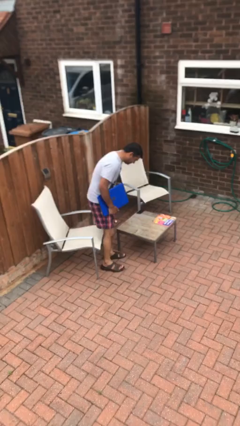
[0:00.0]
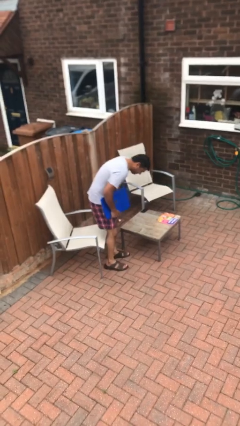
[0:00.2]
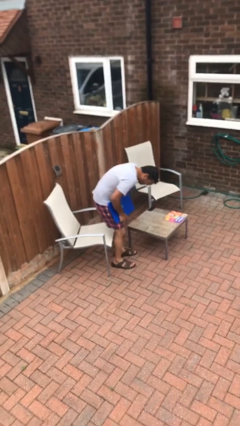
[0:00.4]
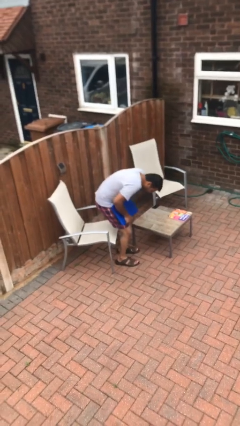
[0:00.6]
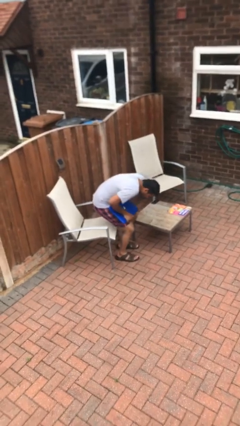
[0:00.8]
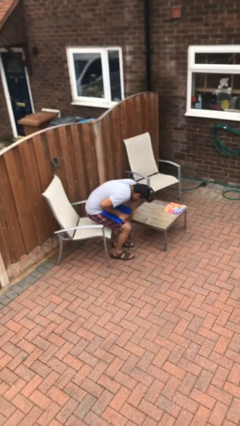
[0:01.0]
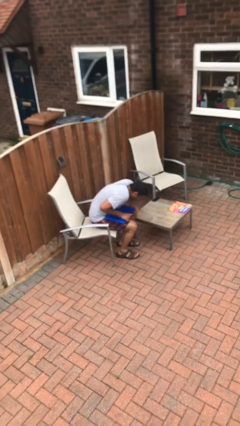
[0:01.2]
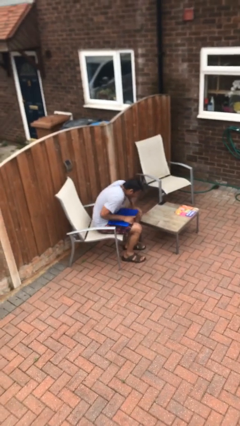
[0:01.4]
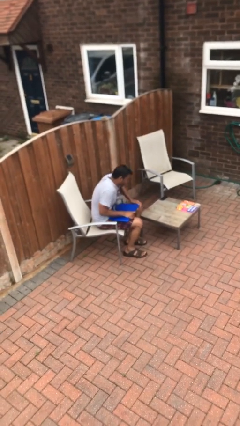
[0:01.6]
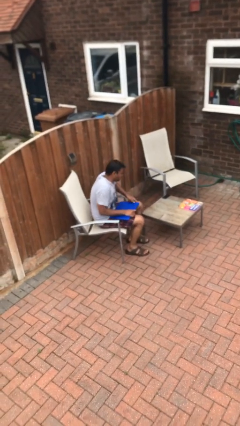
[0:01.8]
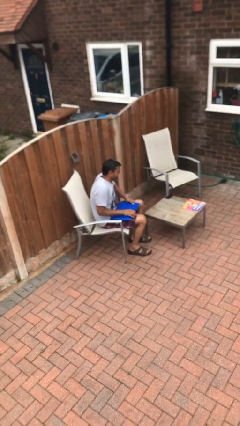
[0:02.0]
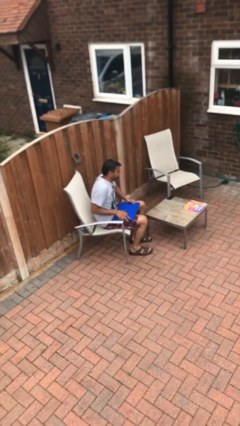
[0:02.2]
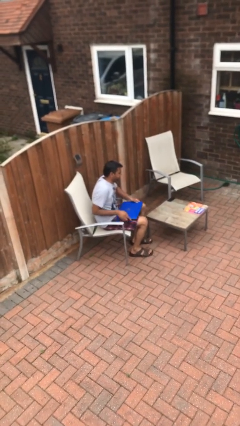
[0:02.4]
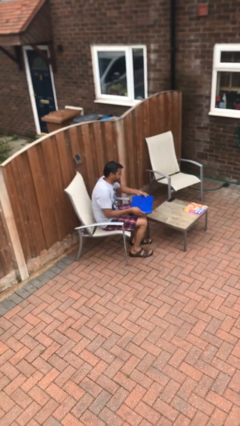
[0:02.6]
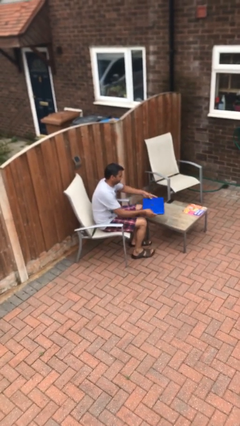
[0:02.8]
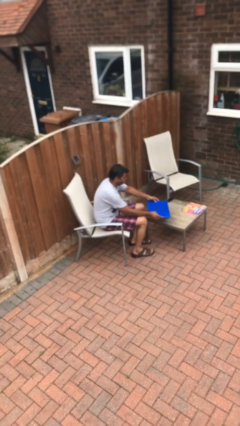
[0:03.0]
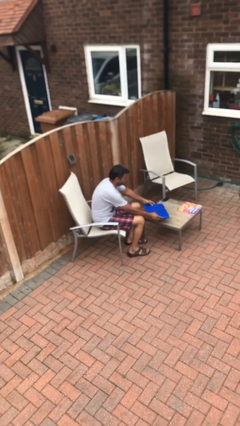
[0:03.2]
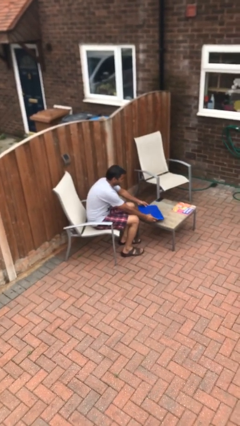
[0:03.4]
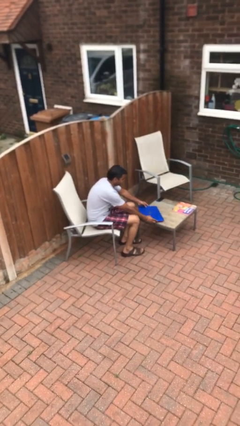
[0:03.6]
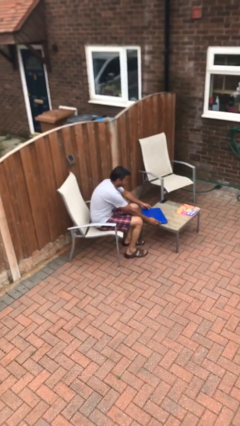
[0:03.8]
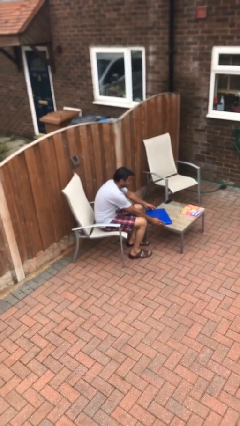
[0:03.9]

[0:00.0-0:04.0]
person sits down

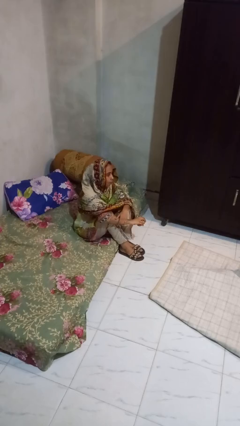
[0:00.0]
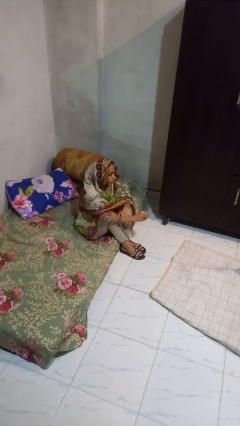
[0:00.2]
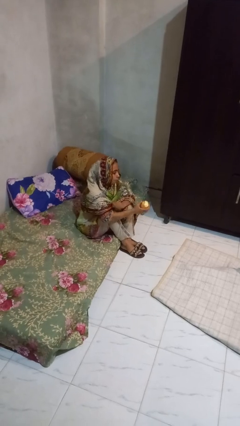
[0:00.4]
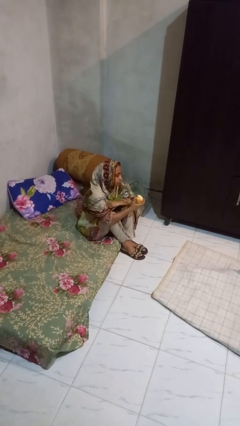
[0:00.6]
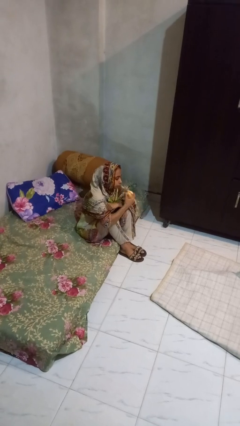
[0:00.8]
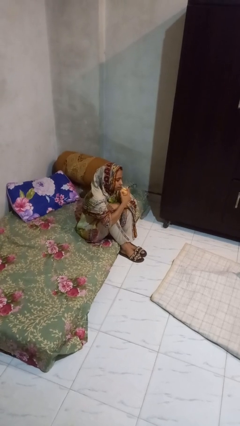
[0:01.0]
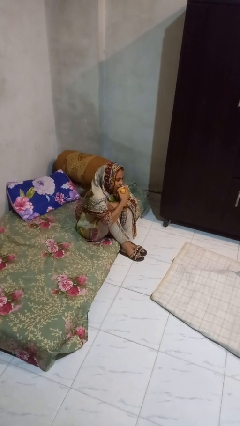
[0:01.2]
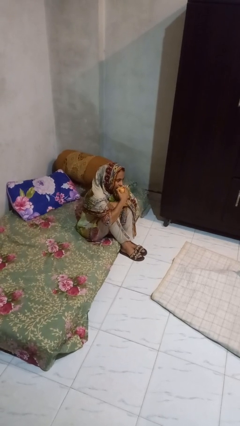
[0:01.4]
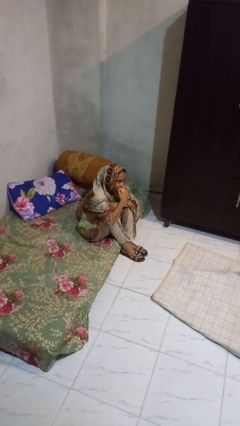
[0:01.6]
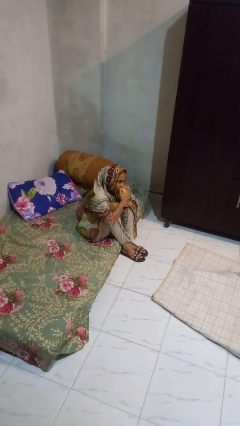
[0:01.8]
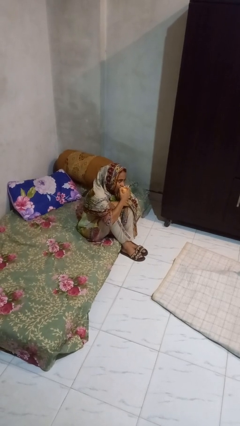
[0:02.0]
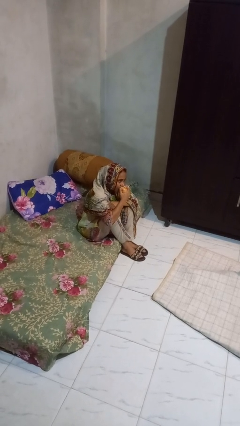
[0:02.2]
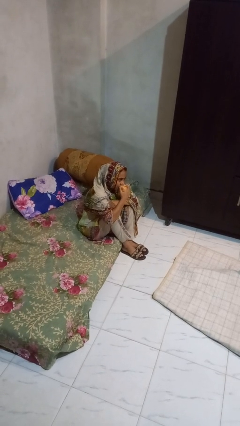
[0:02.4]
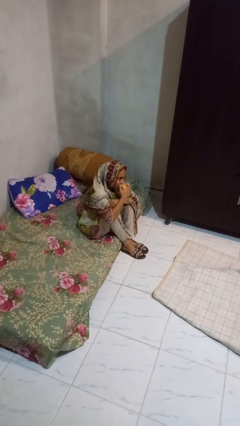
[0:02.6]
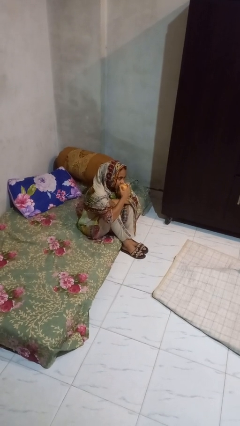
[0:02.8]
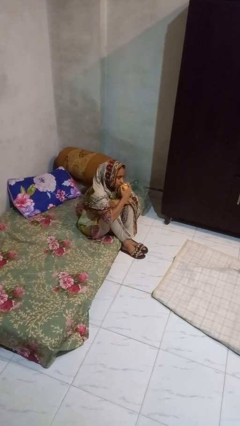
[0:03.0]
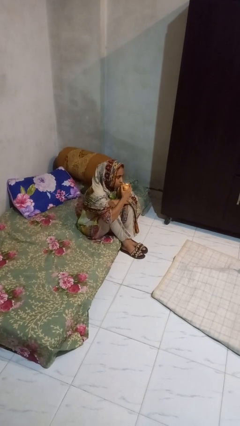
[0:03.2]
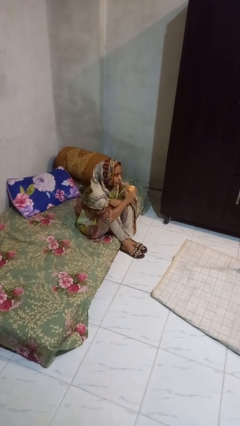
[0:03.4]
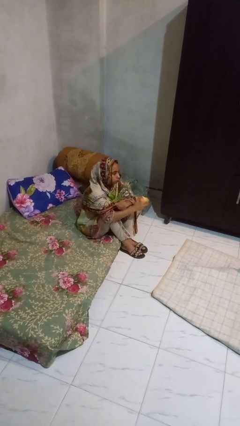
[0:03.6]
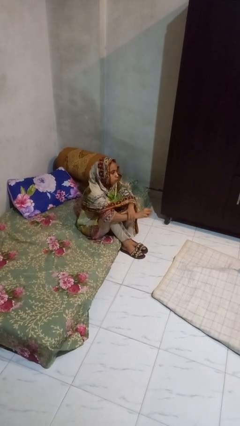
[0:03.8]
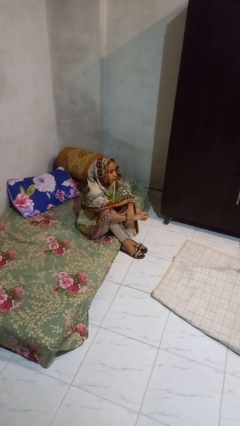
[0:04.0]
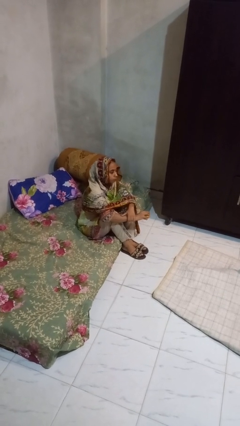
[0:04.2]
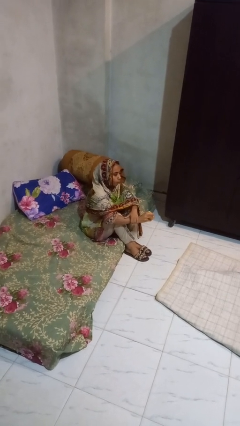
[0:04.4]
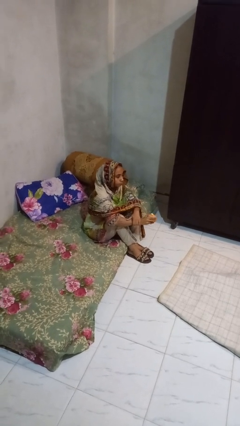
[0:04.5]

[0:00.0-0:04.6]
person eats apple

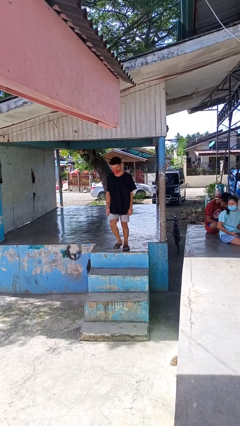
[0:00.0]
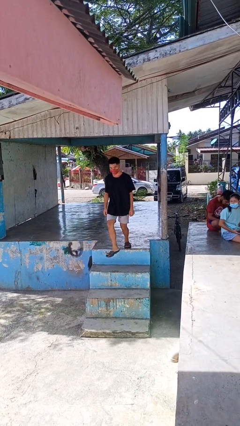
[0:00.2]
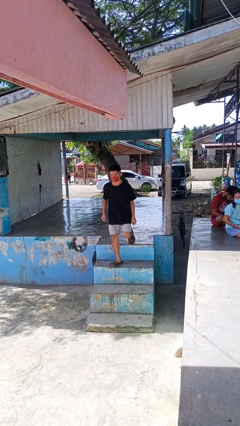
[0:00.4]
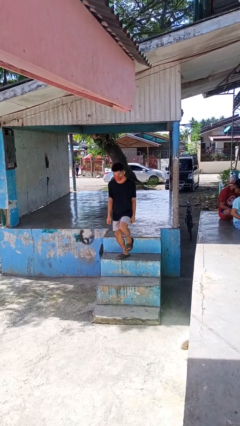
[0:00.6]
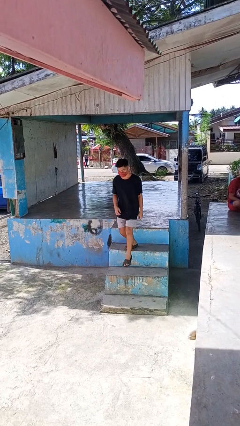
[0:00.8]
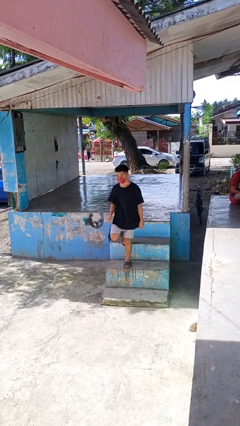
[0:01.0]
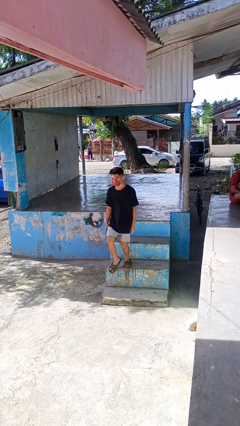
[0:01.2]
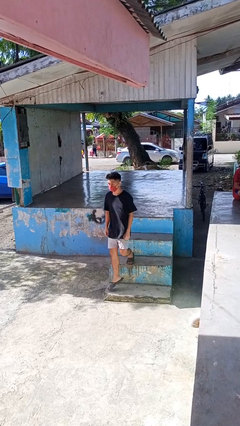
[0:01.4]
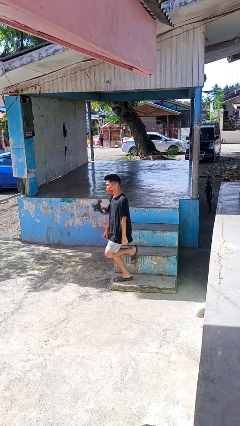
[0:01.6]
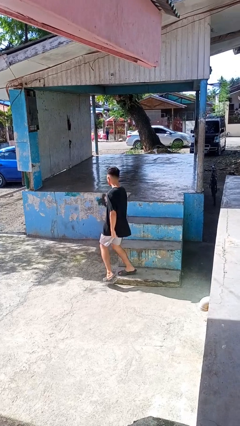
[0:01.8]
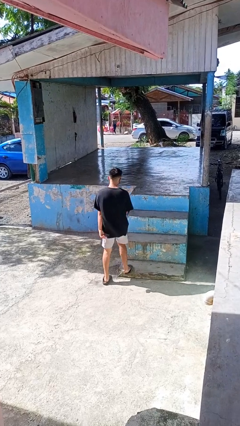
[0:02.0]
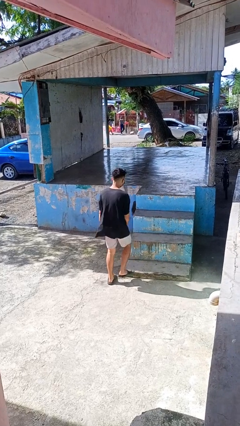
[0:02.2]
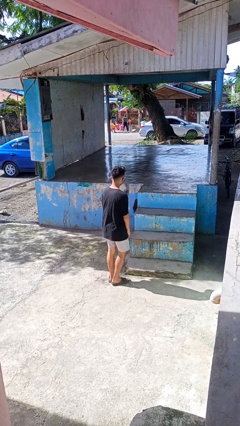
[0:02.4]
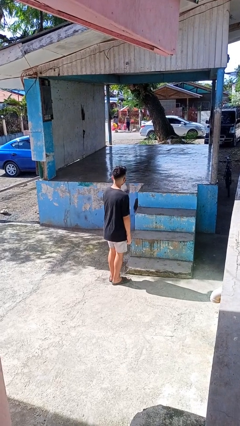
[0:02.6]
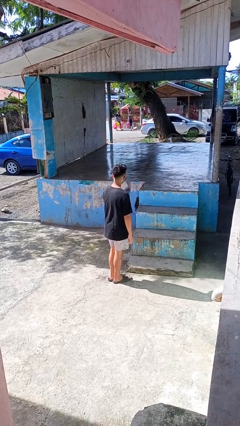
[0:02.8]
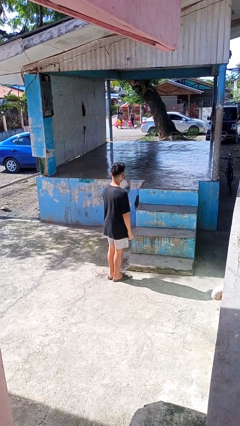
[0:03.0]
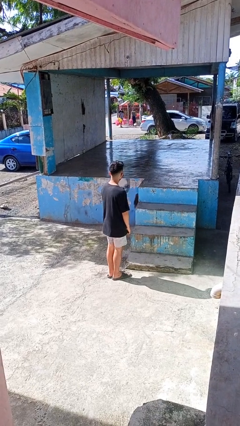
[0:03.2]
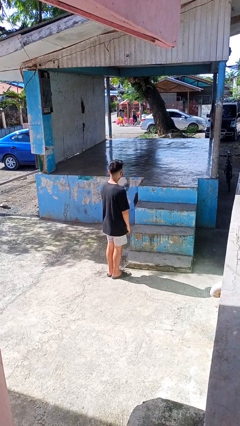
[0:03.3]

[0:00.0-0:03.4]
person climbs down stairs

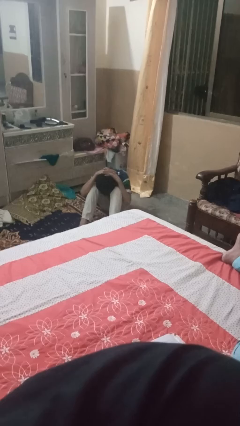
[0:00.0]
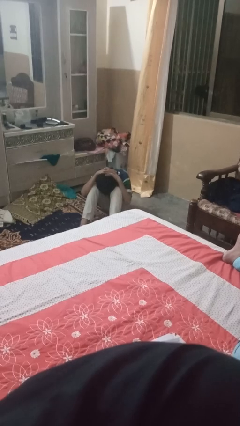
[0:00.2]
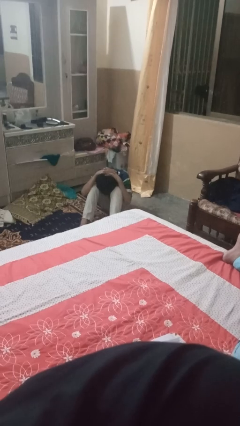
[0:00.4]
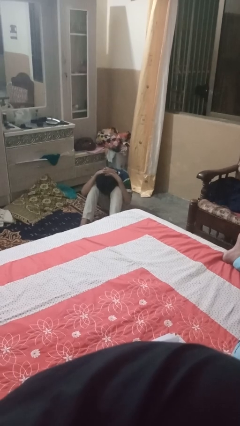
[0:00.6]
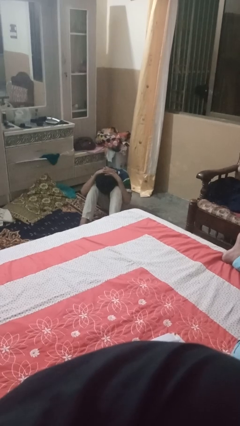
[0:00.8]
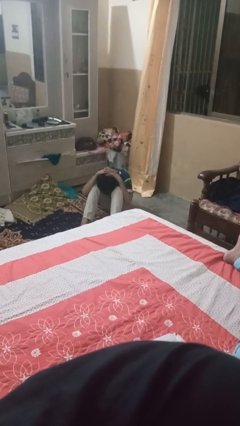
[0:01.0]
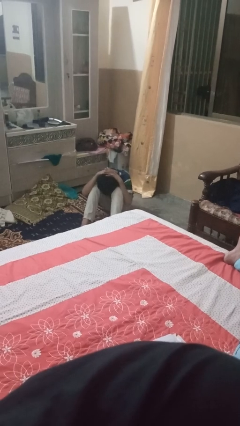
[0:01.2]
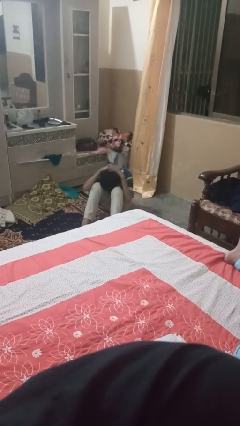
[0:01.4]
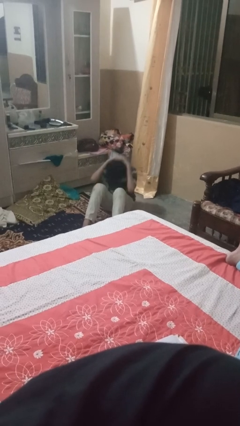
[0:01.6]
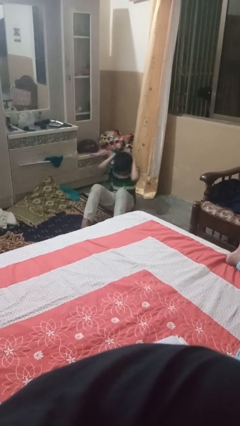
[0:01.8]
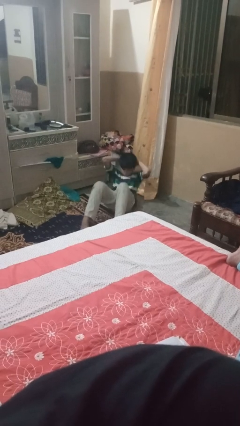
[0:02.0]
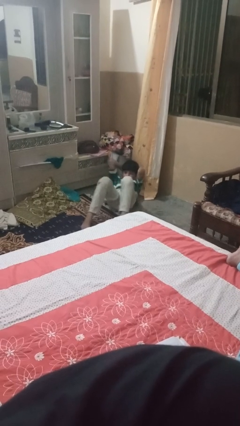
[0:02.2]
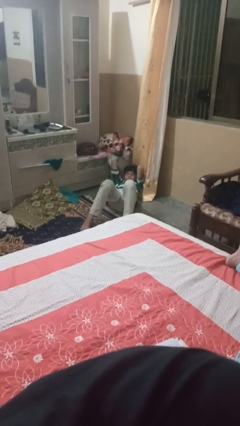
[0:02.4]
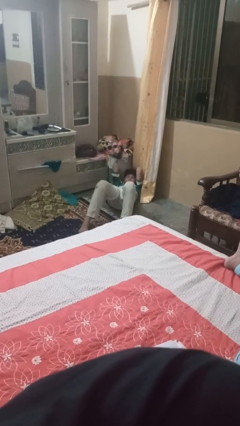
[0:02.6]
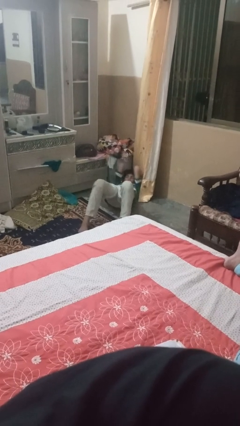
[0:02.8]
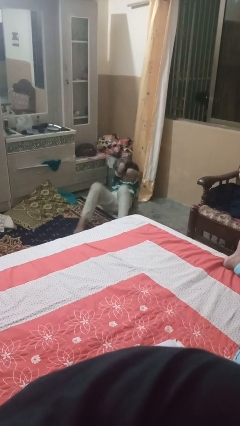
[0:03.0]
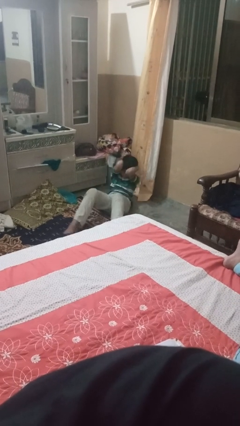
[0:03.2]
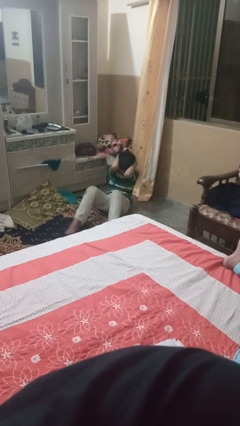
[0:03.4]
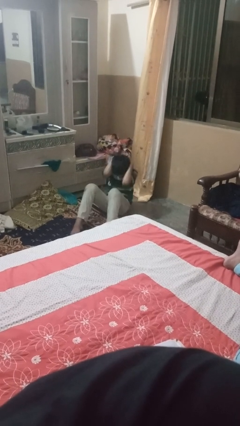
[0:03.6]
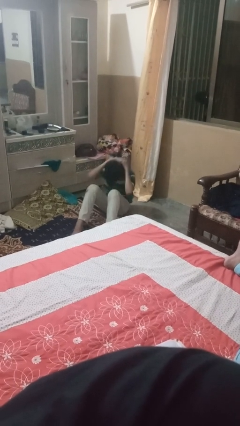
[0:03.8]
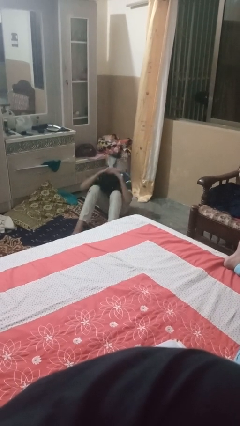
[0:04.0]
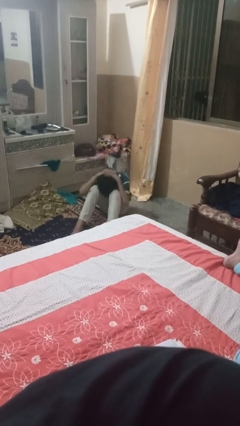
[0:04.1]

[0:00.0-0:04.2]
person exercises with situp

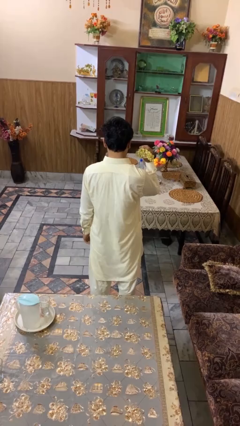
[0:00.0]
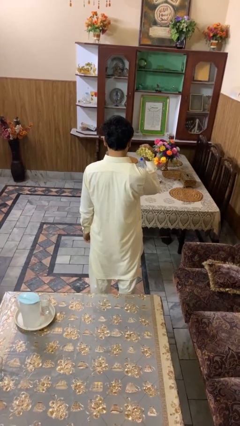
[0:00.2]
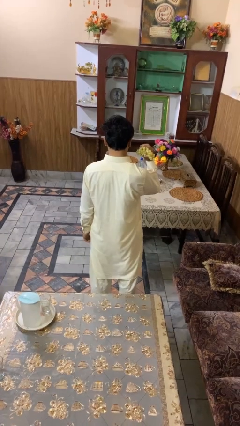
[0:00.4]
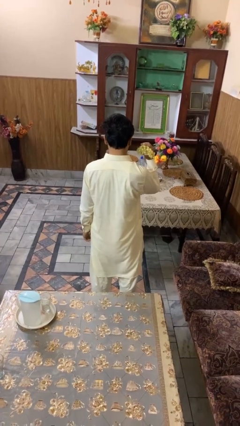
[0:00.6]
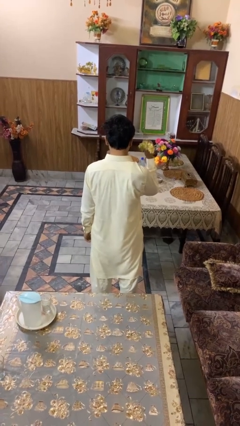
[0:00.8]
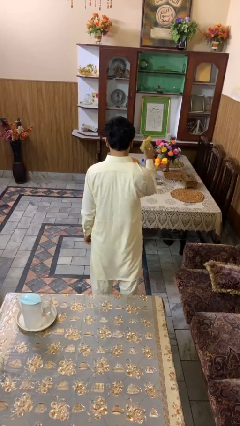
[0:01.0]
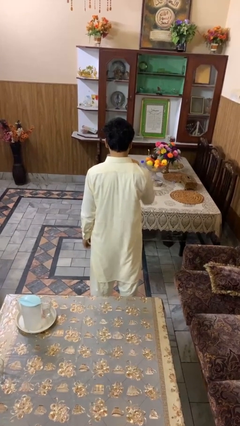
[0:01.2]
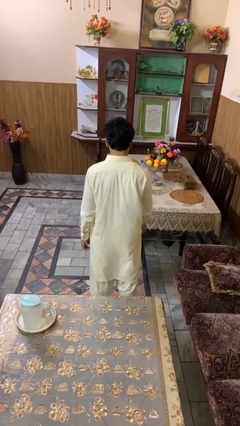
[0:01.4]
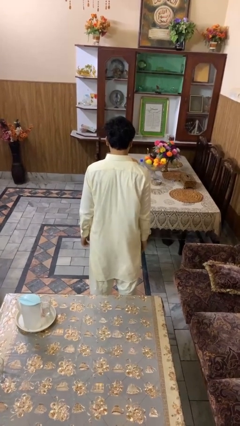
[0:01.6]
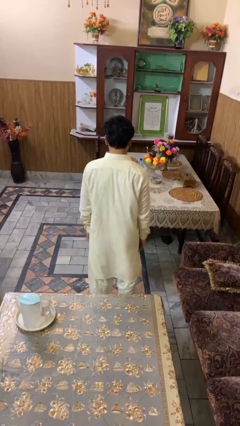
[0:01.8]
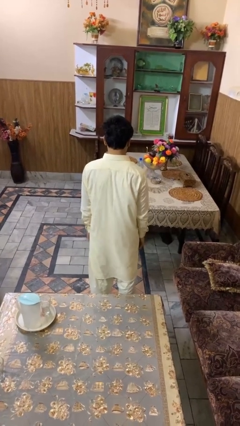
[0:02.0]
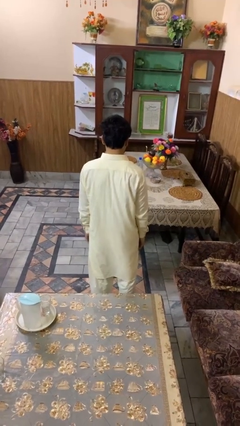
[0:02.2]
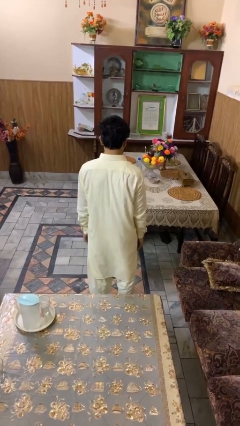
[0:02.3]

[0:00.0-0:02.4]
person throws object on table
